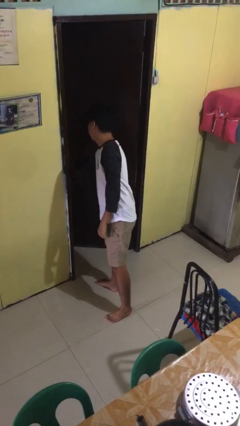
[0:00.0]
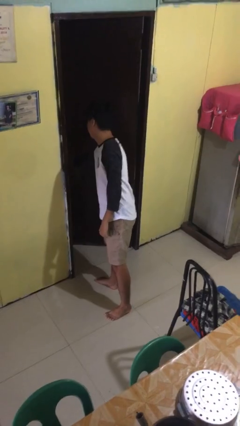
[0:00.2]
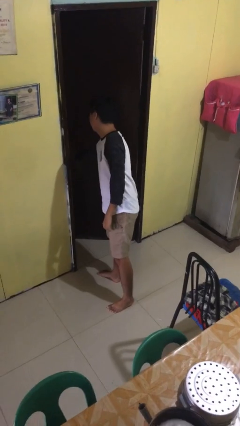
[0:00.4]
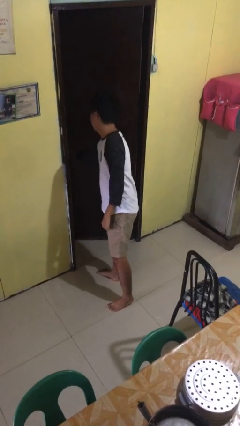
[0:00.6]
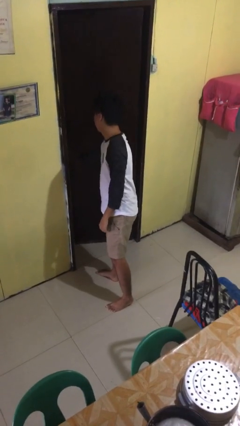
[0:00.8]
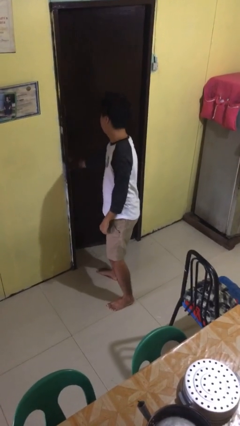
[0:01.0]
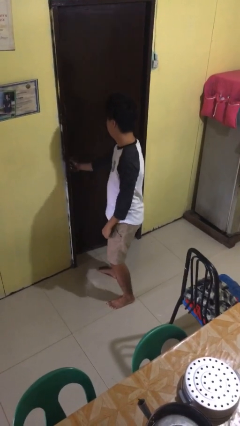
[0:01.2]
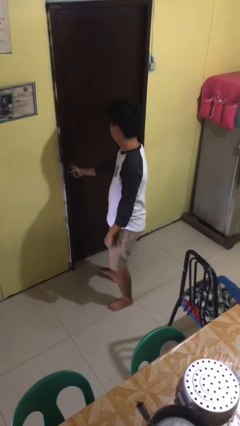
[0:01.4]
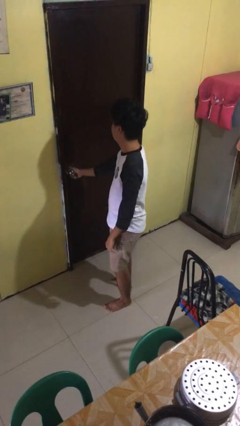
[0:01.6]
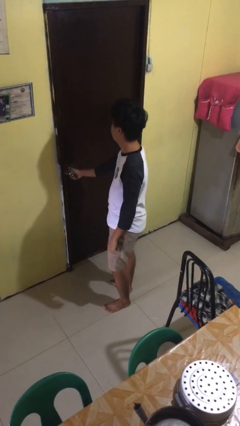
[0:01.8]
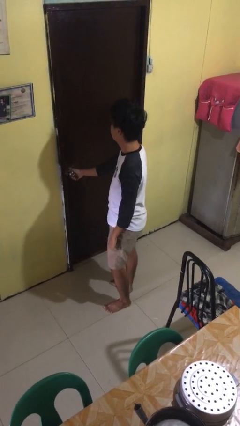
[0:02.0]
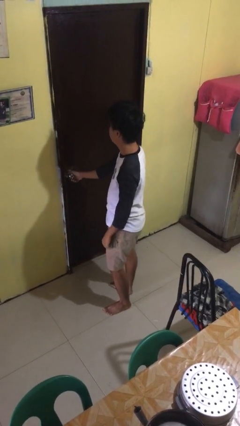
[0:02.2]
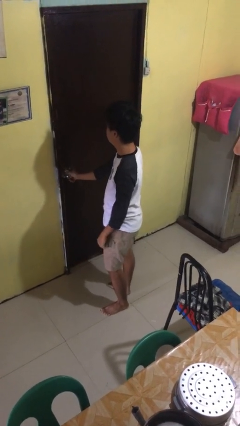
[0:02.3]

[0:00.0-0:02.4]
person closes facility door

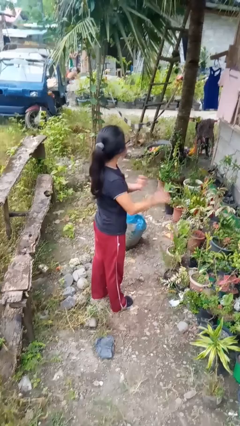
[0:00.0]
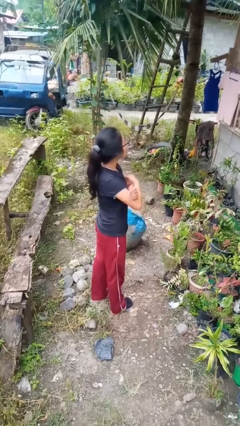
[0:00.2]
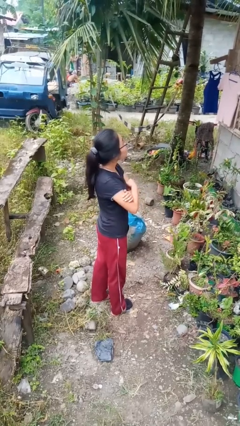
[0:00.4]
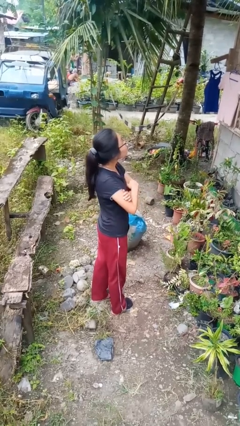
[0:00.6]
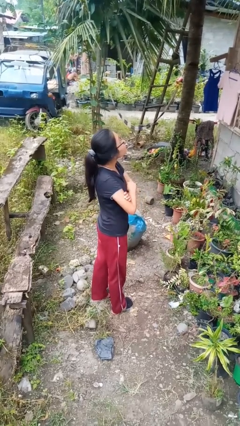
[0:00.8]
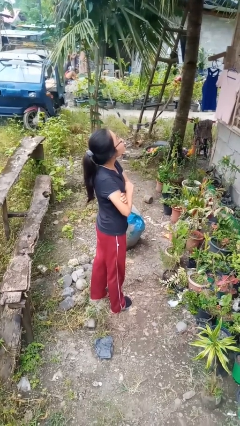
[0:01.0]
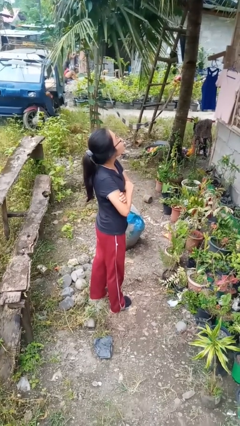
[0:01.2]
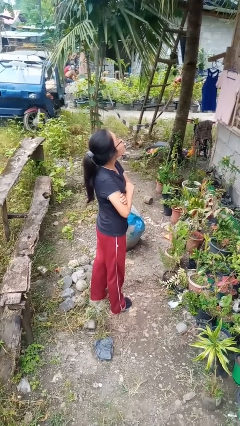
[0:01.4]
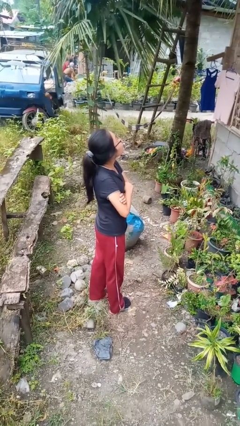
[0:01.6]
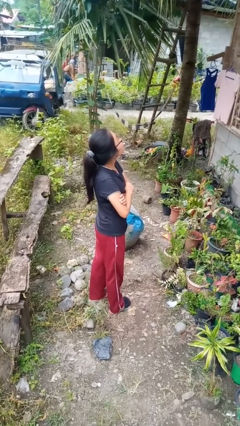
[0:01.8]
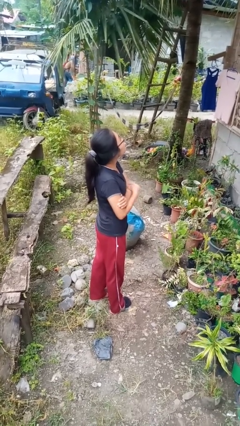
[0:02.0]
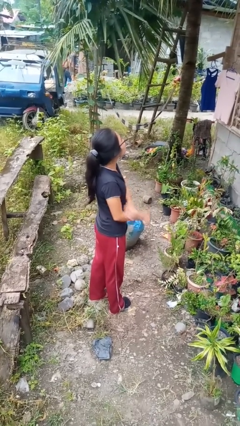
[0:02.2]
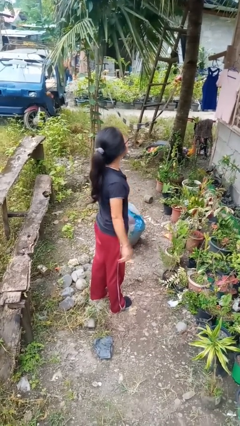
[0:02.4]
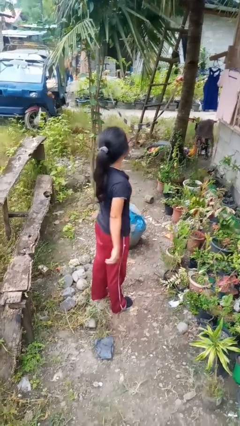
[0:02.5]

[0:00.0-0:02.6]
person crosses arms

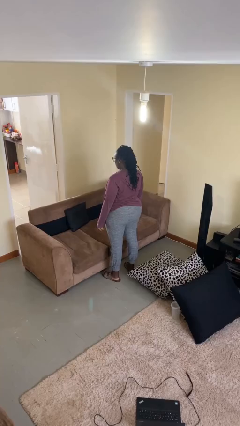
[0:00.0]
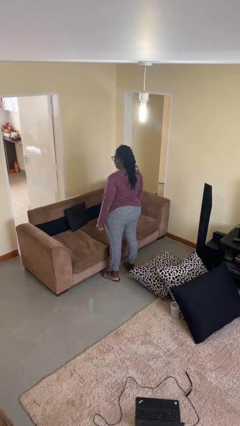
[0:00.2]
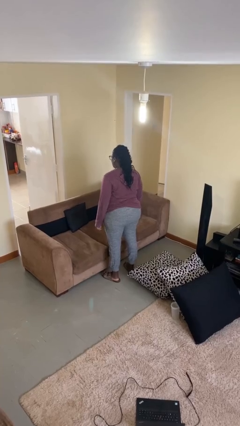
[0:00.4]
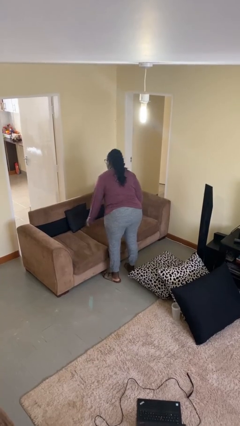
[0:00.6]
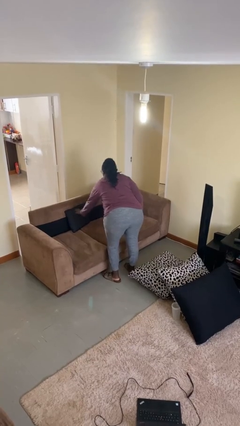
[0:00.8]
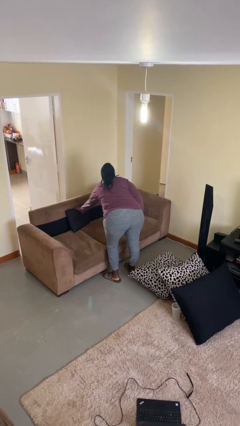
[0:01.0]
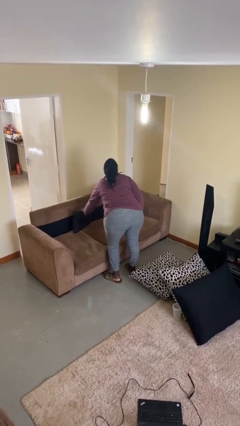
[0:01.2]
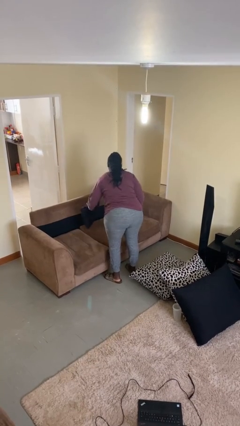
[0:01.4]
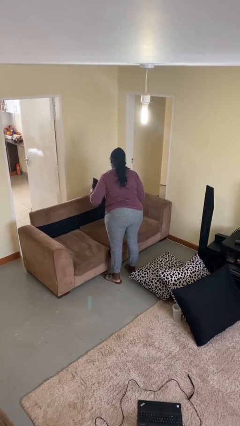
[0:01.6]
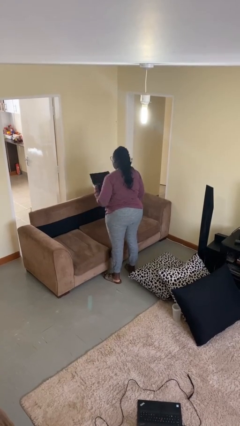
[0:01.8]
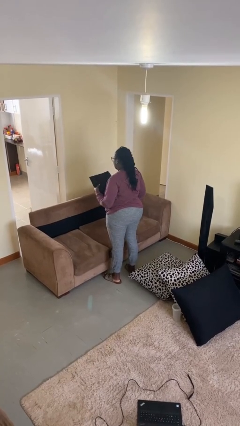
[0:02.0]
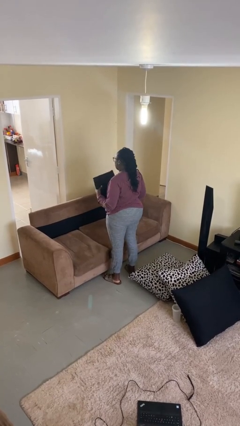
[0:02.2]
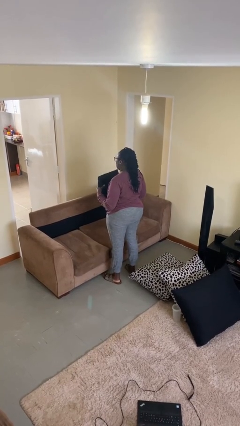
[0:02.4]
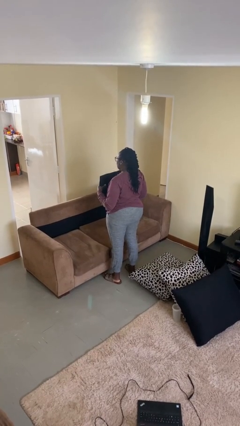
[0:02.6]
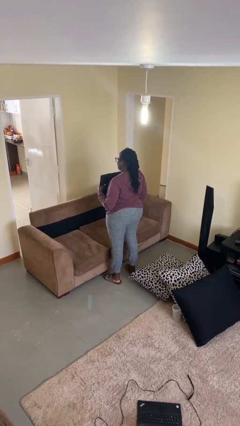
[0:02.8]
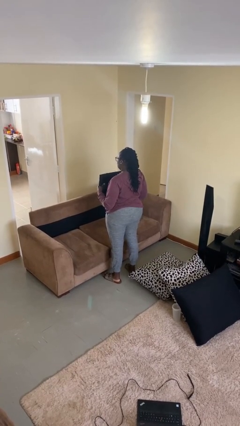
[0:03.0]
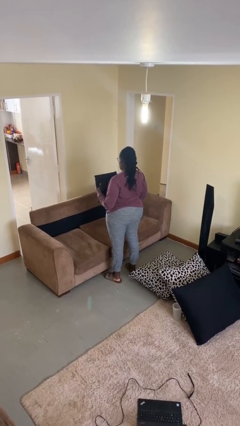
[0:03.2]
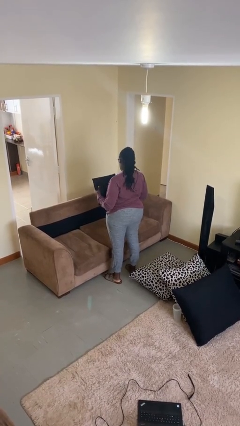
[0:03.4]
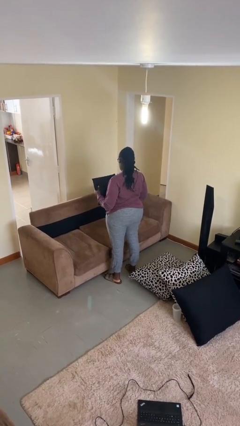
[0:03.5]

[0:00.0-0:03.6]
person picks up object from couch

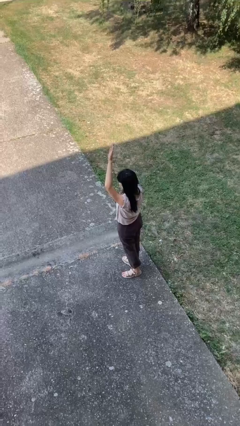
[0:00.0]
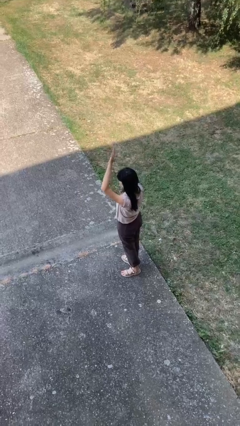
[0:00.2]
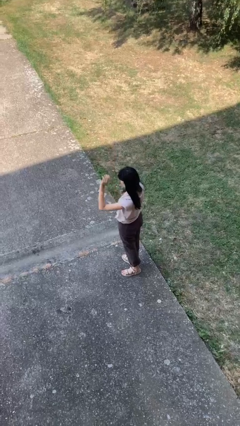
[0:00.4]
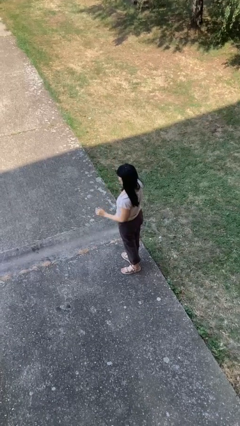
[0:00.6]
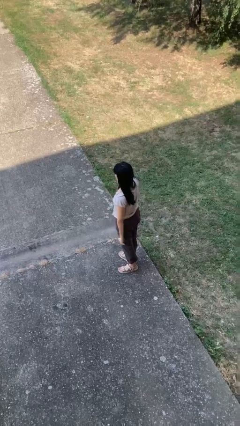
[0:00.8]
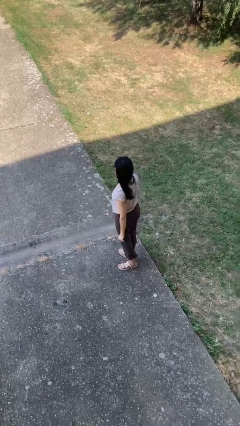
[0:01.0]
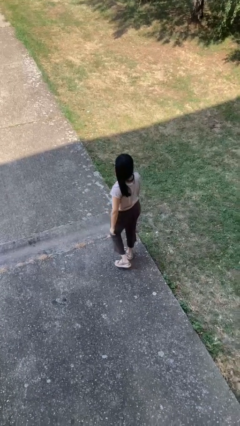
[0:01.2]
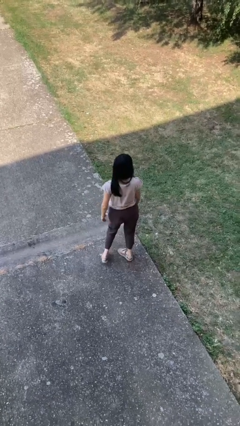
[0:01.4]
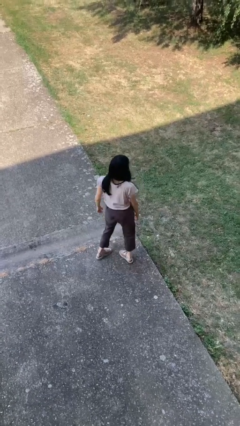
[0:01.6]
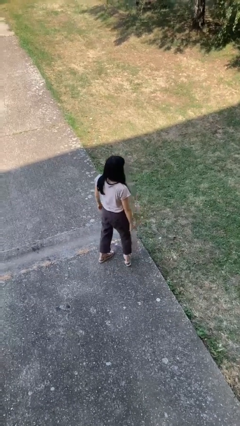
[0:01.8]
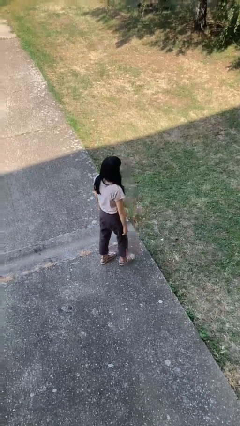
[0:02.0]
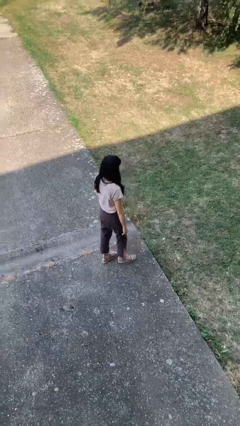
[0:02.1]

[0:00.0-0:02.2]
person gestures lower hand

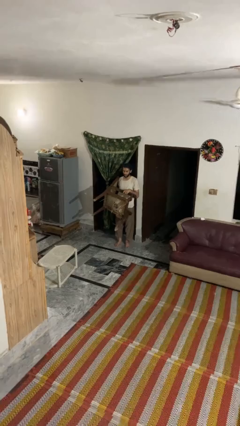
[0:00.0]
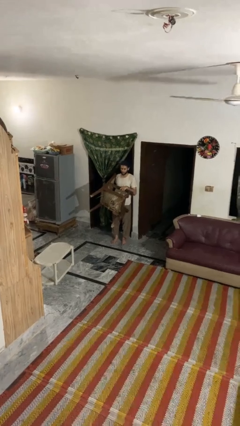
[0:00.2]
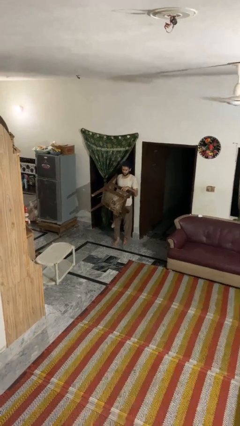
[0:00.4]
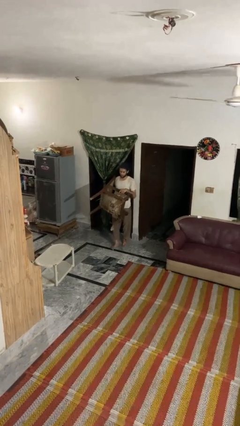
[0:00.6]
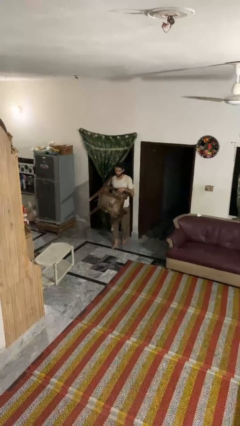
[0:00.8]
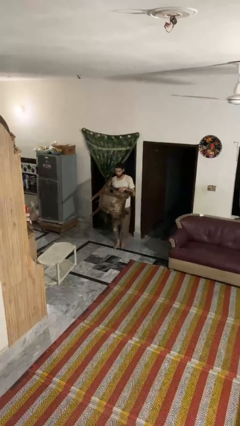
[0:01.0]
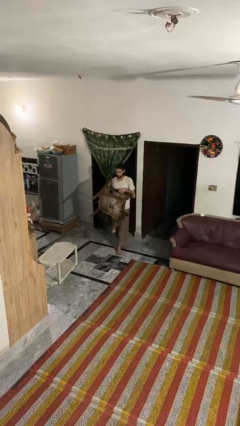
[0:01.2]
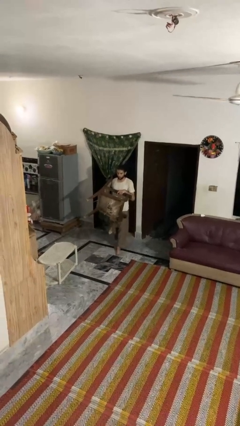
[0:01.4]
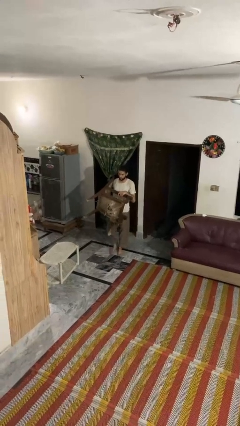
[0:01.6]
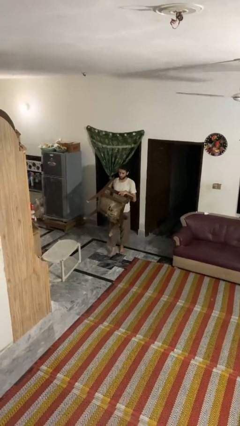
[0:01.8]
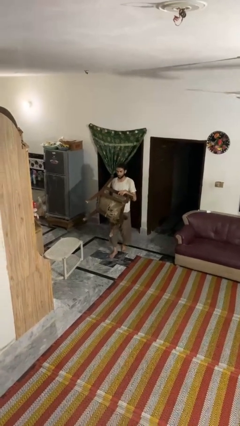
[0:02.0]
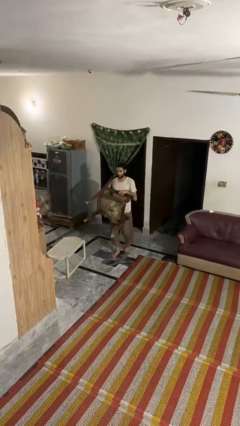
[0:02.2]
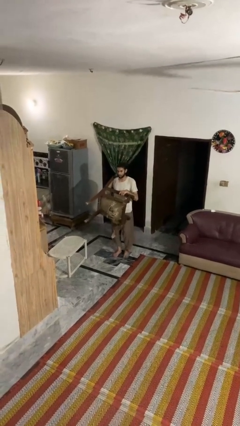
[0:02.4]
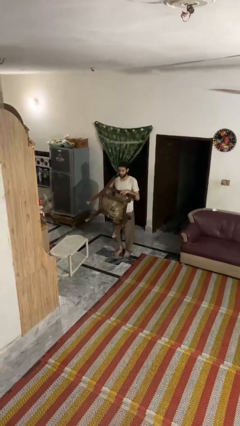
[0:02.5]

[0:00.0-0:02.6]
person carries furniture

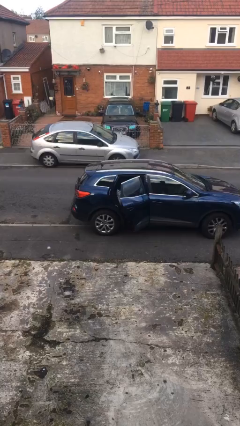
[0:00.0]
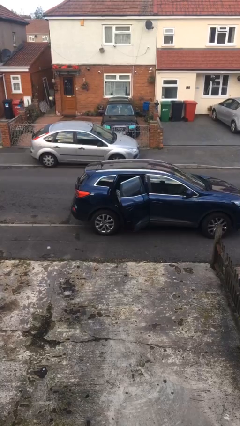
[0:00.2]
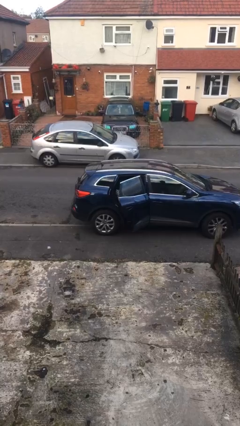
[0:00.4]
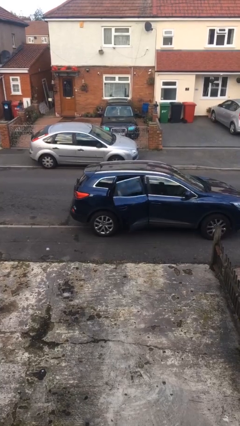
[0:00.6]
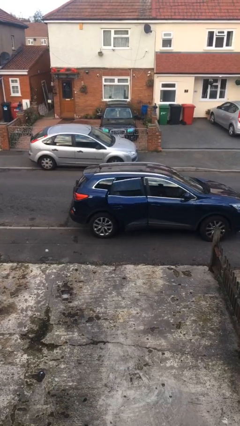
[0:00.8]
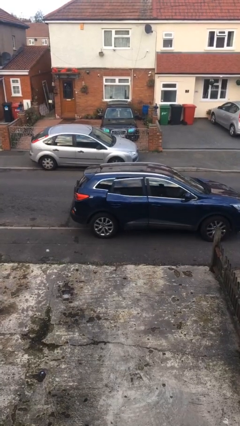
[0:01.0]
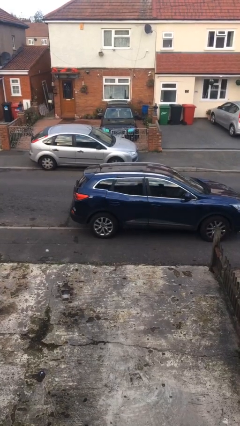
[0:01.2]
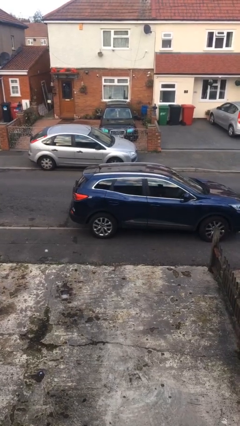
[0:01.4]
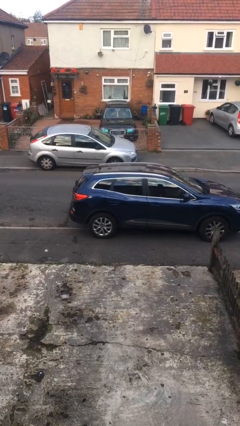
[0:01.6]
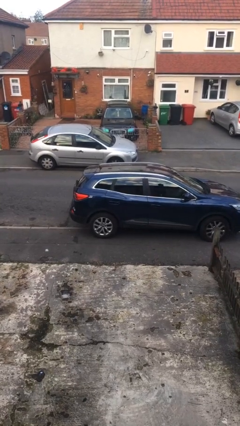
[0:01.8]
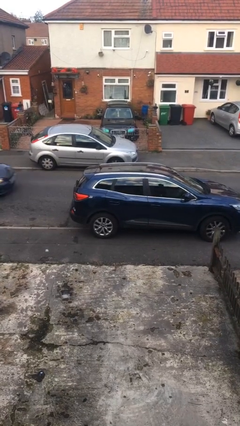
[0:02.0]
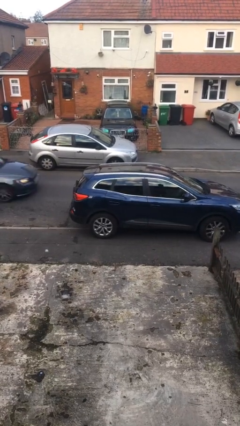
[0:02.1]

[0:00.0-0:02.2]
person closes car door

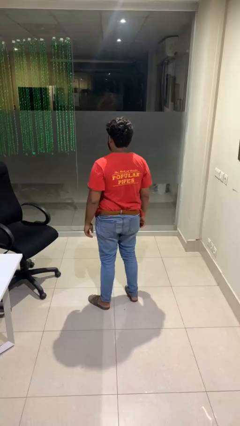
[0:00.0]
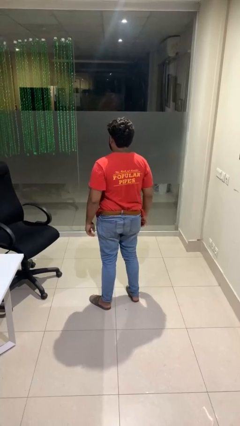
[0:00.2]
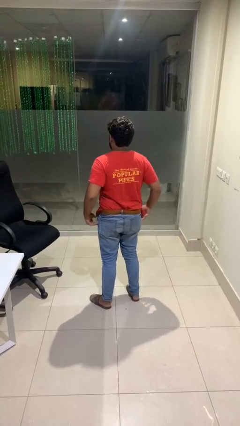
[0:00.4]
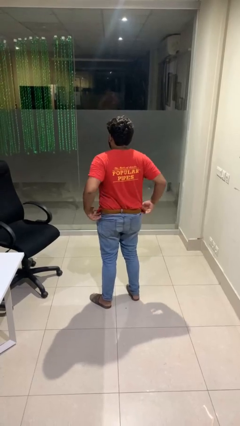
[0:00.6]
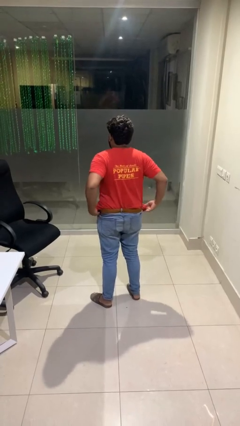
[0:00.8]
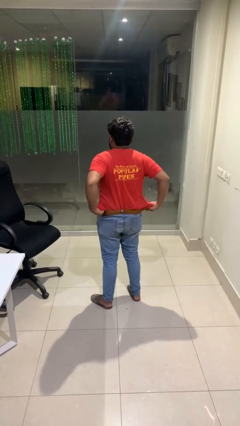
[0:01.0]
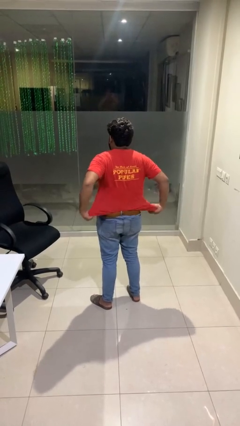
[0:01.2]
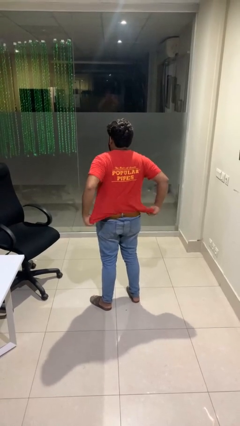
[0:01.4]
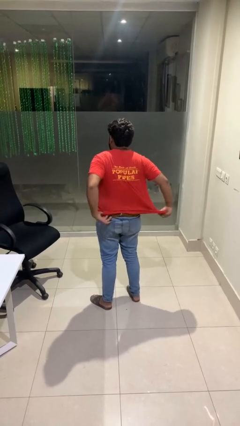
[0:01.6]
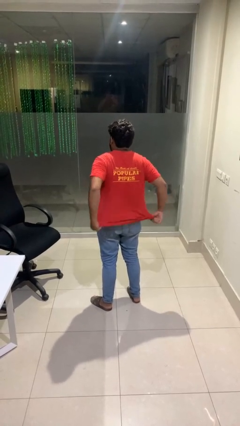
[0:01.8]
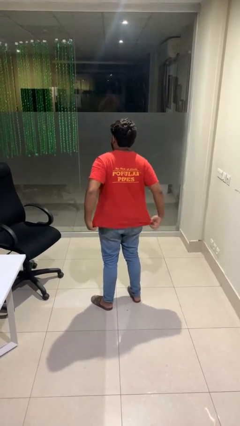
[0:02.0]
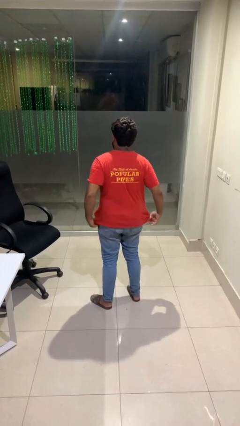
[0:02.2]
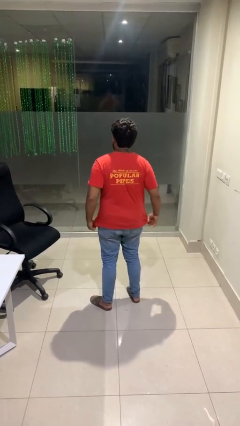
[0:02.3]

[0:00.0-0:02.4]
person untucks shirt
